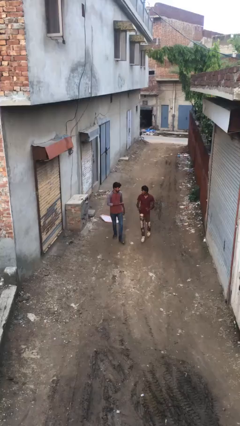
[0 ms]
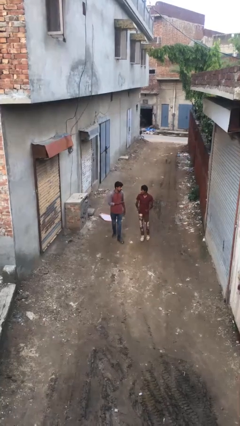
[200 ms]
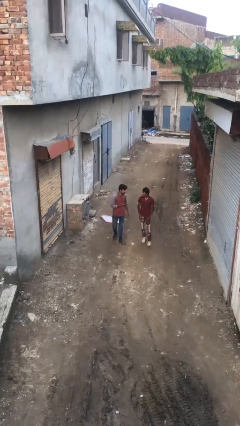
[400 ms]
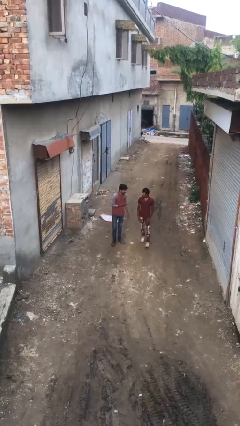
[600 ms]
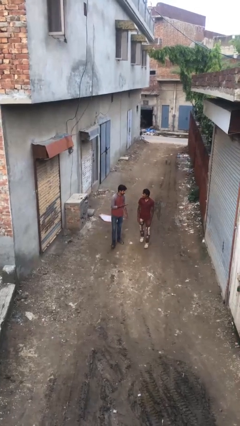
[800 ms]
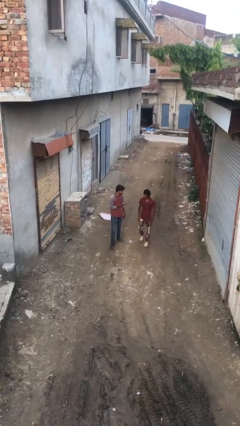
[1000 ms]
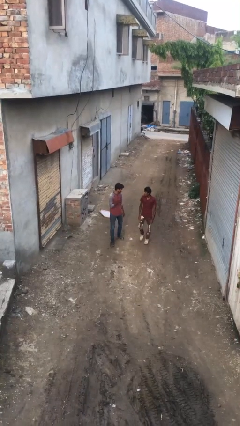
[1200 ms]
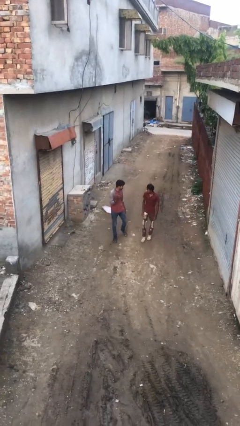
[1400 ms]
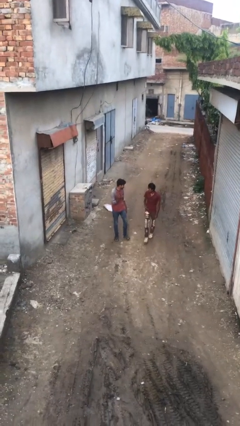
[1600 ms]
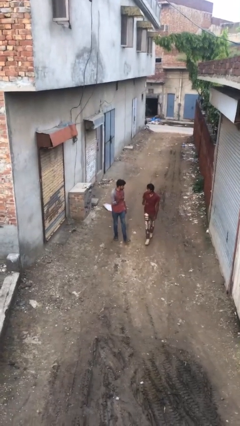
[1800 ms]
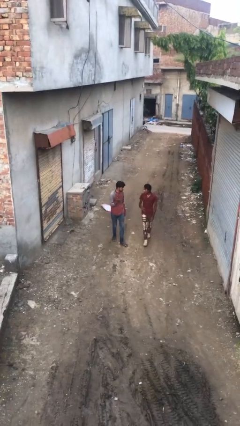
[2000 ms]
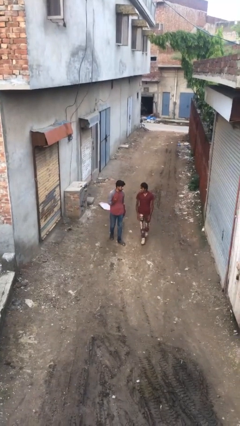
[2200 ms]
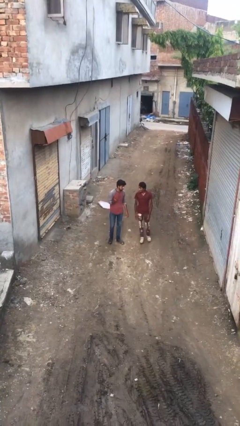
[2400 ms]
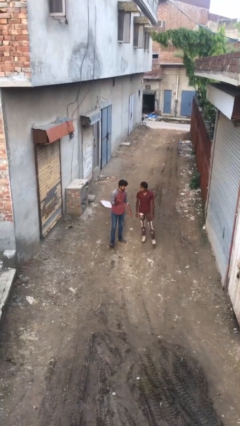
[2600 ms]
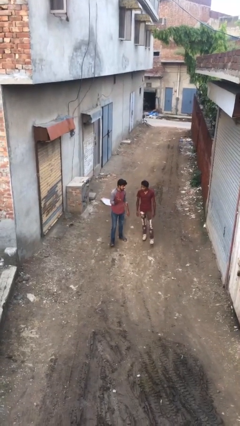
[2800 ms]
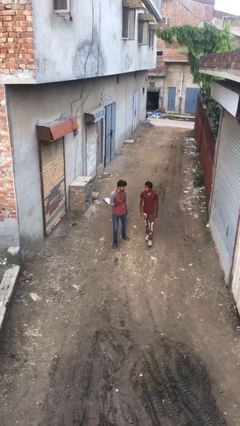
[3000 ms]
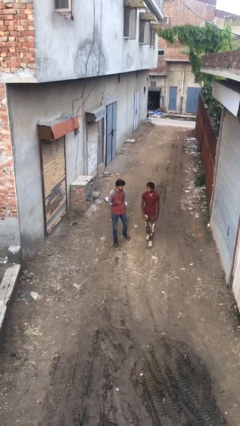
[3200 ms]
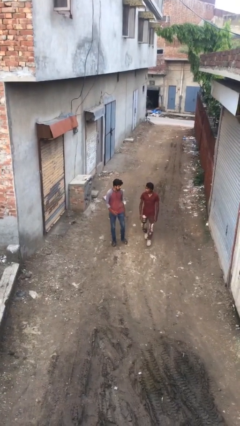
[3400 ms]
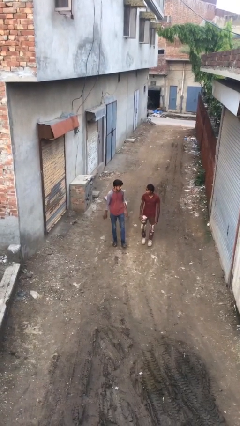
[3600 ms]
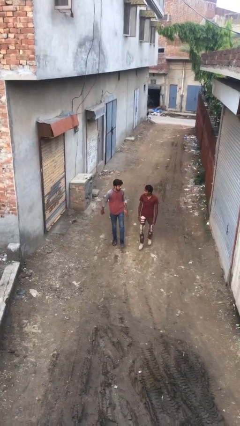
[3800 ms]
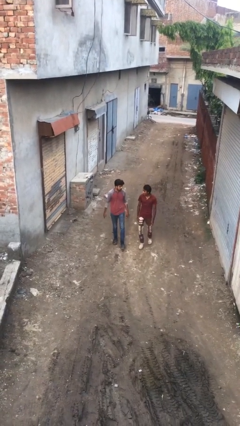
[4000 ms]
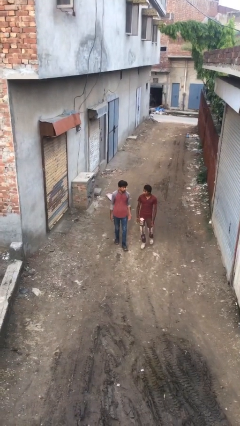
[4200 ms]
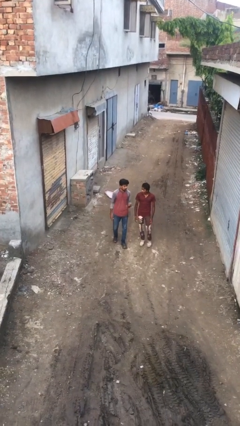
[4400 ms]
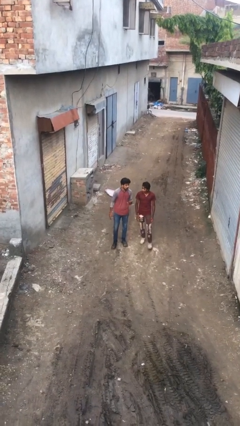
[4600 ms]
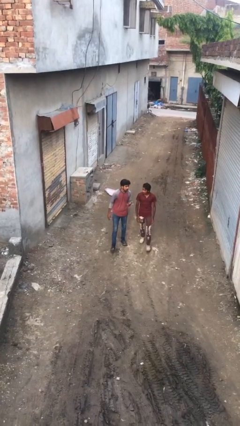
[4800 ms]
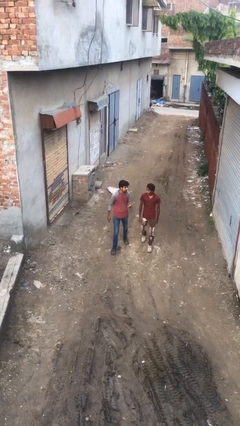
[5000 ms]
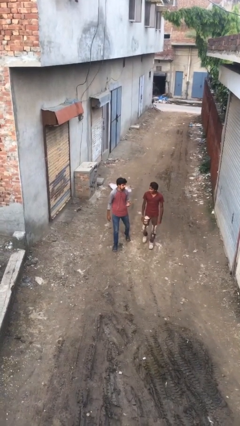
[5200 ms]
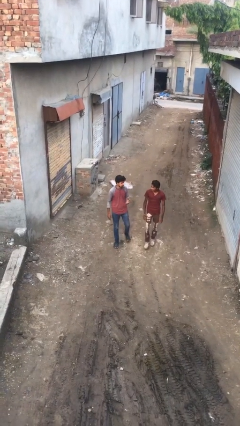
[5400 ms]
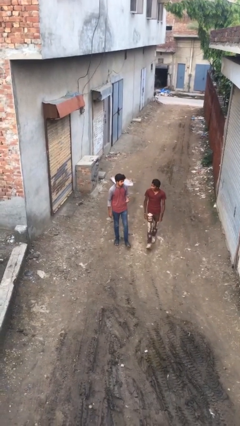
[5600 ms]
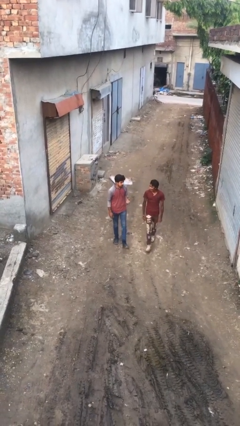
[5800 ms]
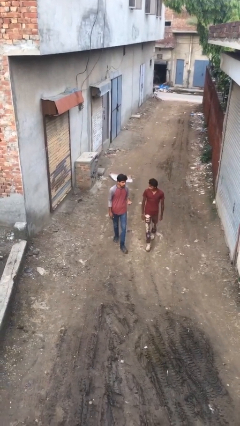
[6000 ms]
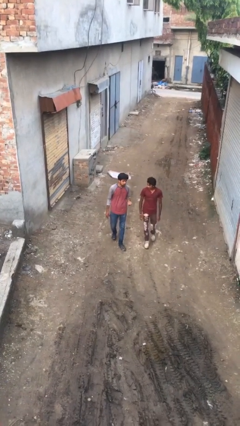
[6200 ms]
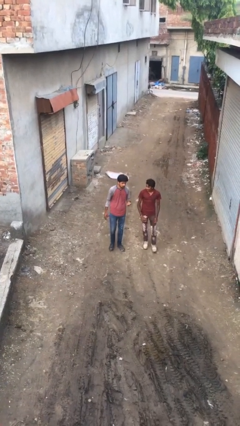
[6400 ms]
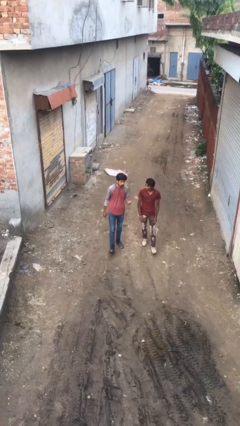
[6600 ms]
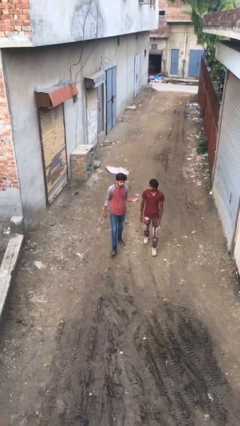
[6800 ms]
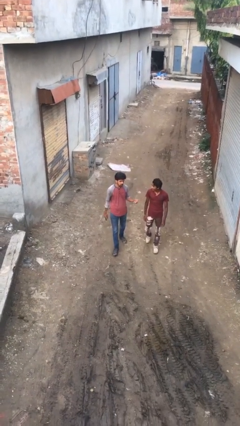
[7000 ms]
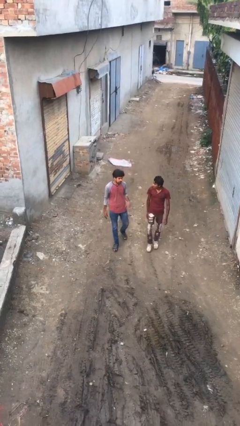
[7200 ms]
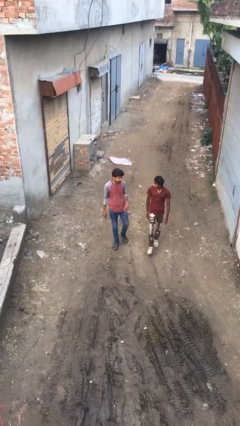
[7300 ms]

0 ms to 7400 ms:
person talks to person

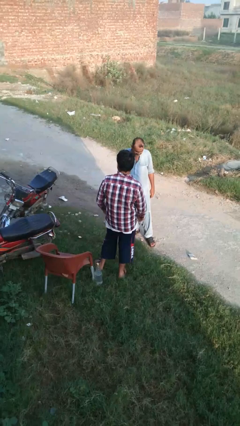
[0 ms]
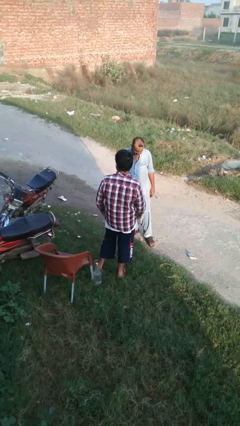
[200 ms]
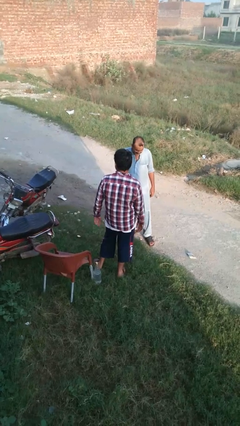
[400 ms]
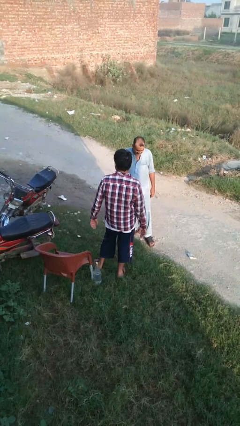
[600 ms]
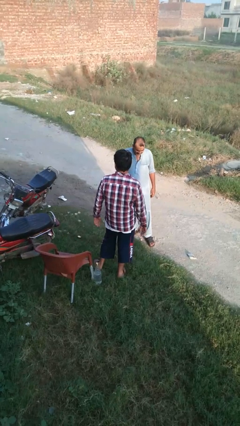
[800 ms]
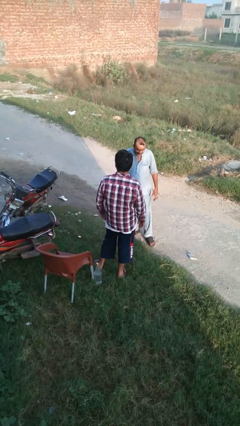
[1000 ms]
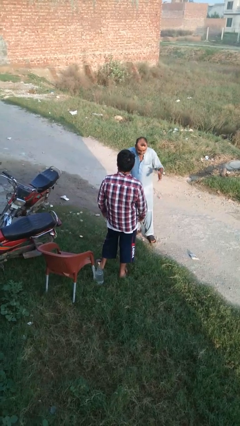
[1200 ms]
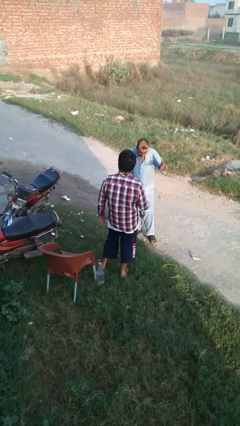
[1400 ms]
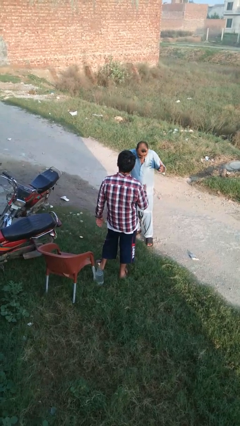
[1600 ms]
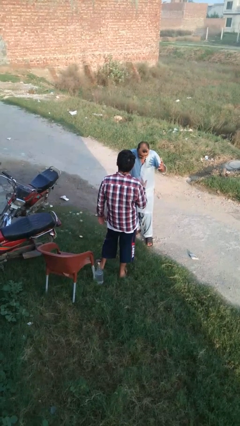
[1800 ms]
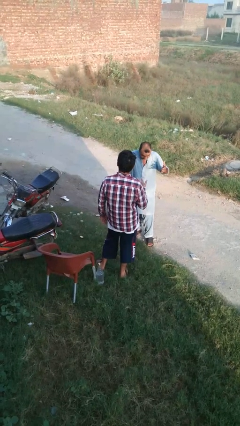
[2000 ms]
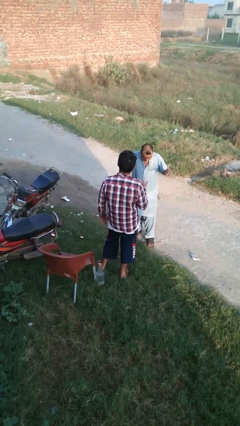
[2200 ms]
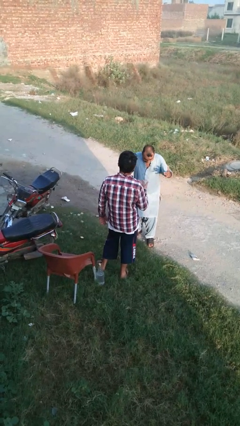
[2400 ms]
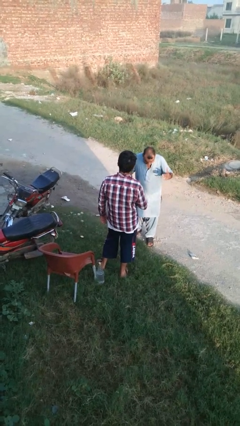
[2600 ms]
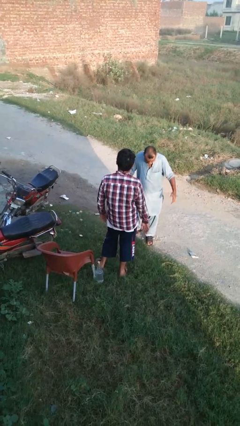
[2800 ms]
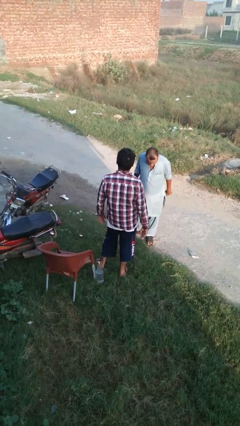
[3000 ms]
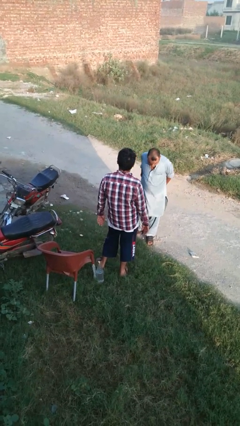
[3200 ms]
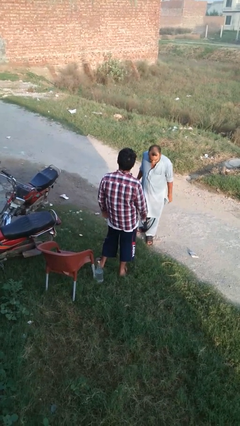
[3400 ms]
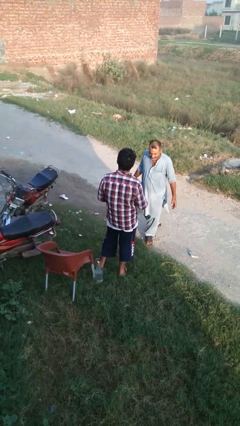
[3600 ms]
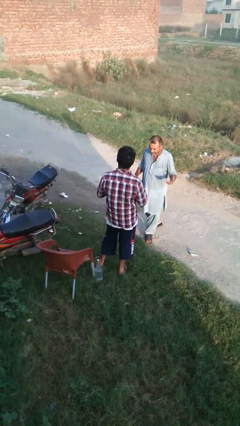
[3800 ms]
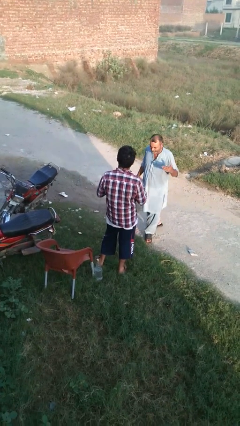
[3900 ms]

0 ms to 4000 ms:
person laughs with person

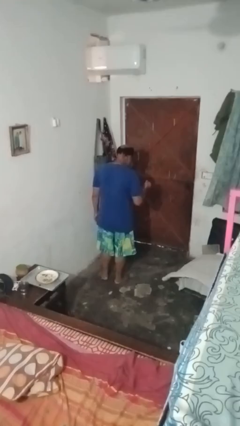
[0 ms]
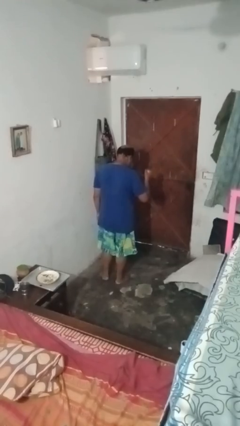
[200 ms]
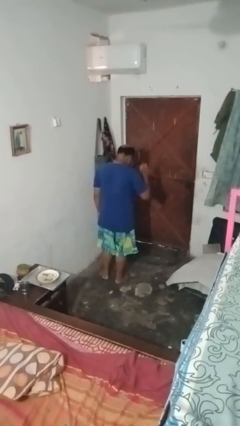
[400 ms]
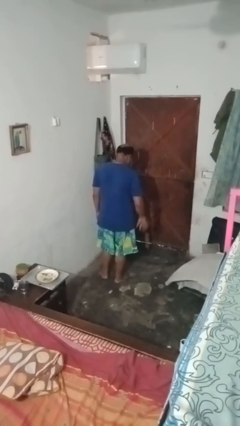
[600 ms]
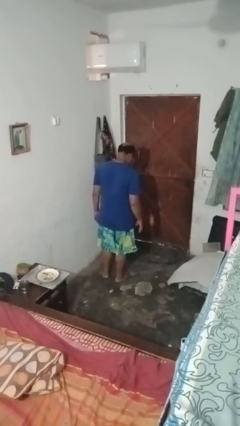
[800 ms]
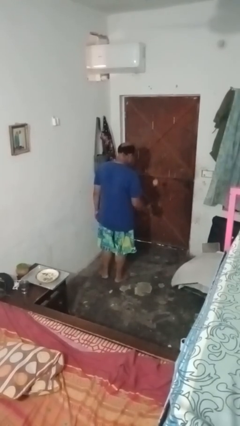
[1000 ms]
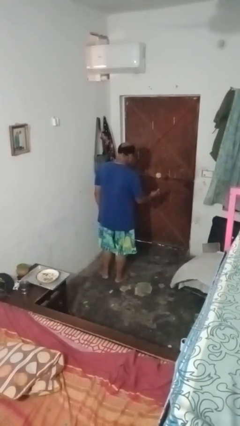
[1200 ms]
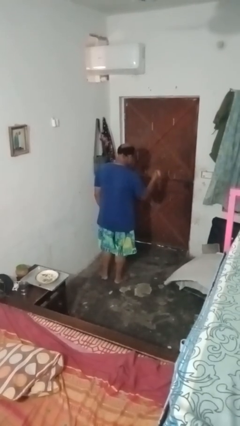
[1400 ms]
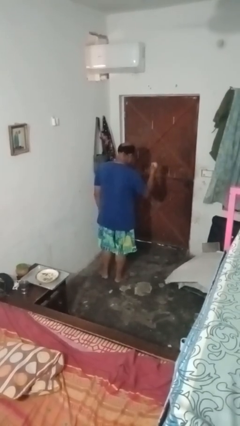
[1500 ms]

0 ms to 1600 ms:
person bounces ball on floor

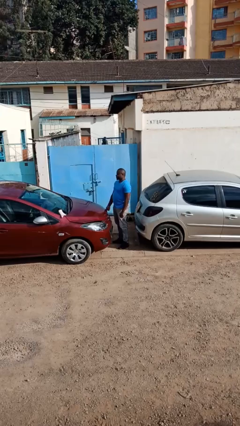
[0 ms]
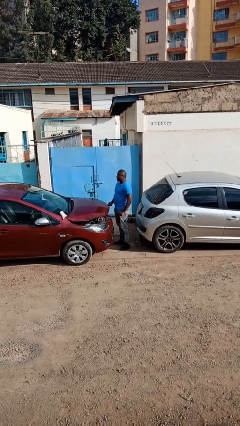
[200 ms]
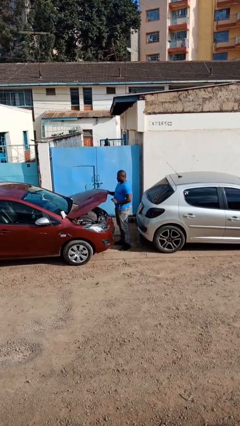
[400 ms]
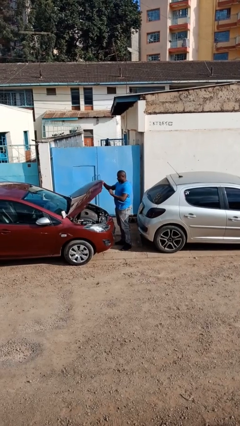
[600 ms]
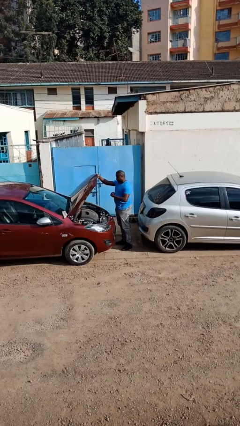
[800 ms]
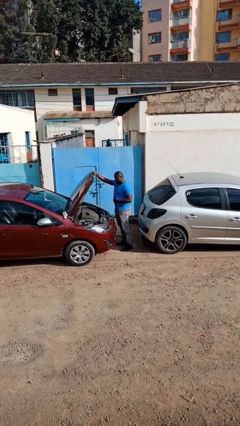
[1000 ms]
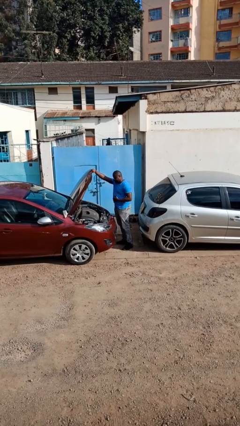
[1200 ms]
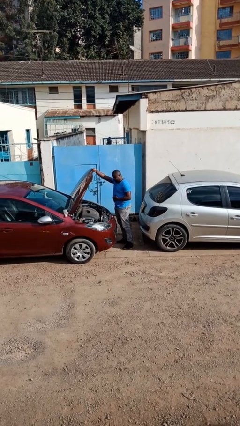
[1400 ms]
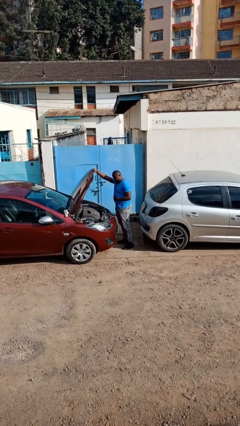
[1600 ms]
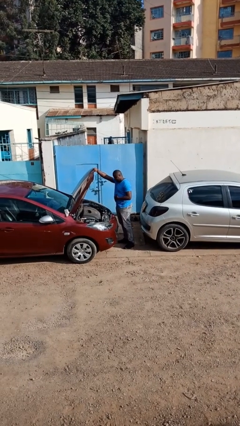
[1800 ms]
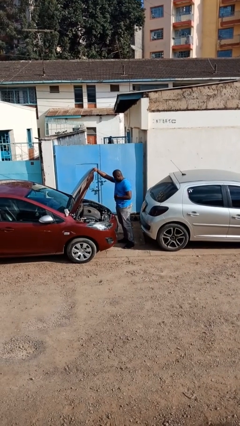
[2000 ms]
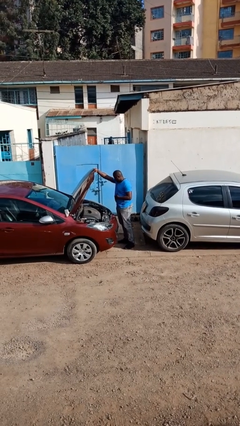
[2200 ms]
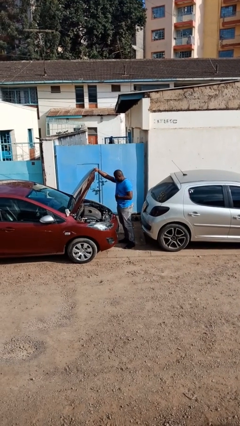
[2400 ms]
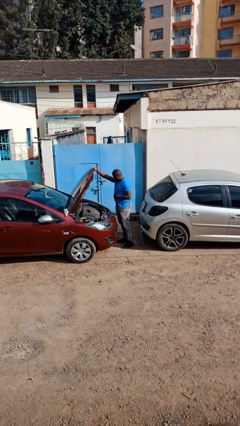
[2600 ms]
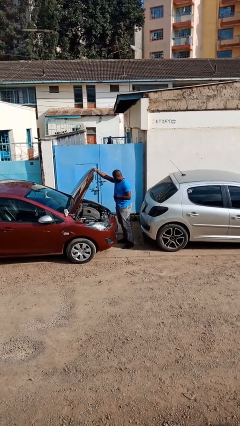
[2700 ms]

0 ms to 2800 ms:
person opens car hood

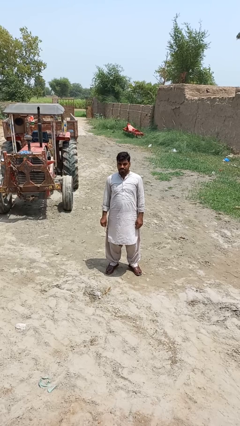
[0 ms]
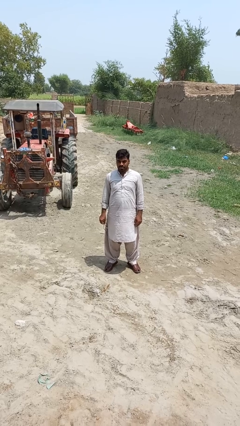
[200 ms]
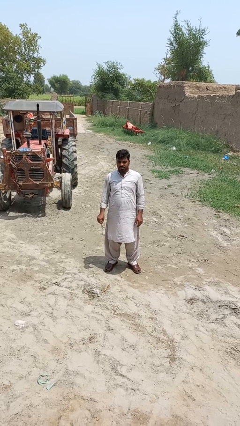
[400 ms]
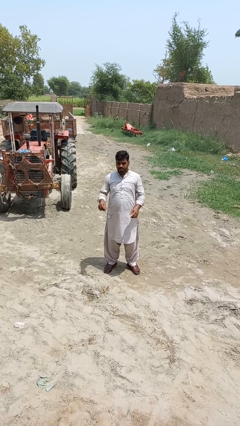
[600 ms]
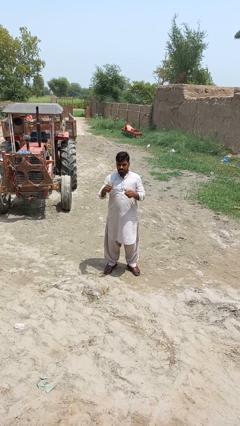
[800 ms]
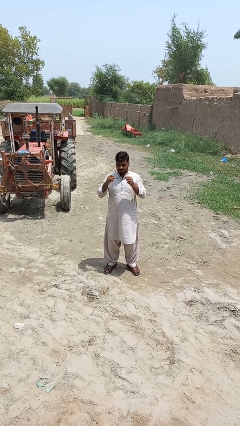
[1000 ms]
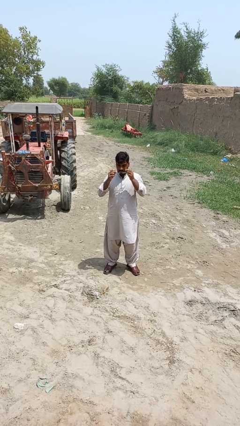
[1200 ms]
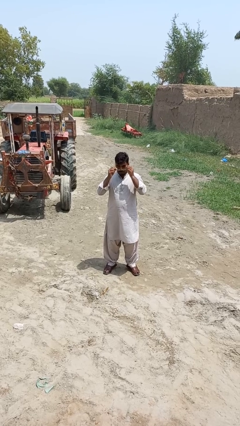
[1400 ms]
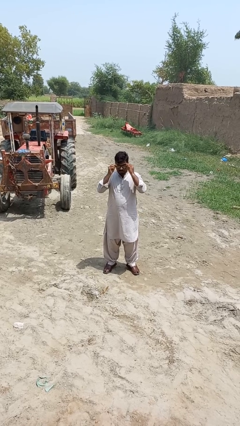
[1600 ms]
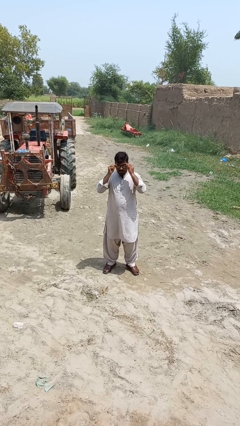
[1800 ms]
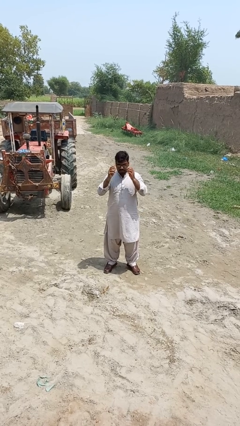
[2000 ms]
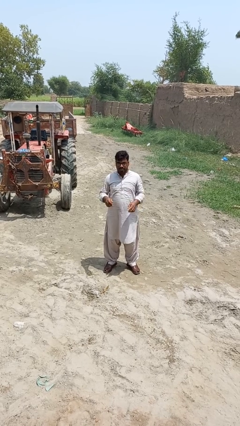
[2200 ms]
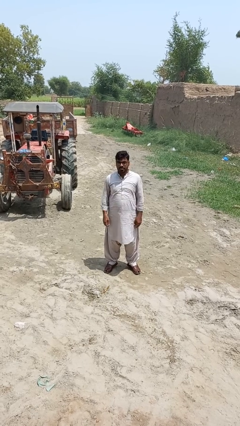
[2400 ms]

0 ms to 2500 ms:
person puts on glasses
